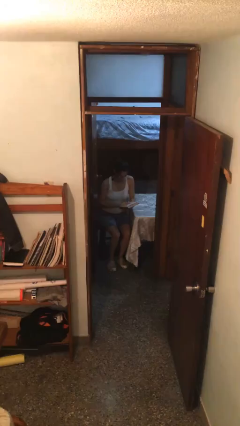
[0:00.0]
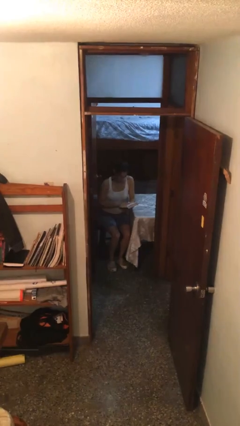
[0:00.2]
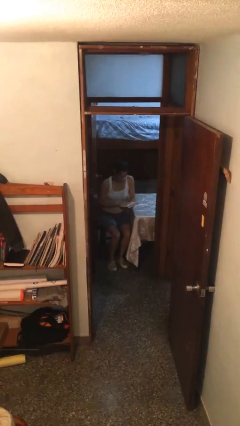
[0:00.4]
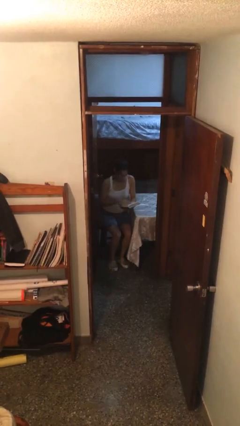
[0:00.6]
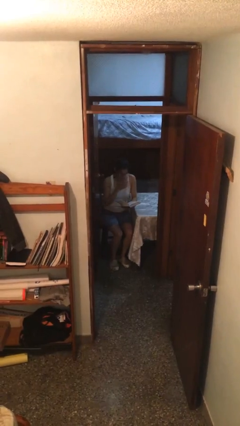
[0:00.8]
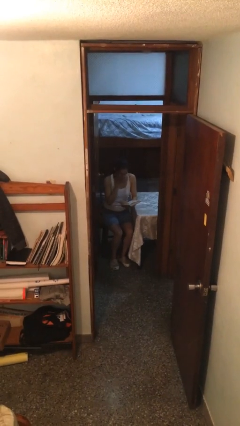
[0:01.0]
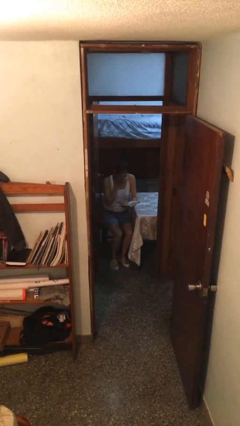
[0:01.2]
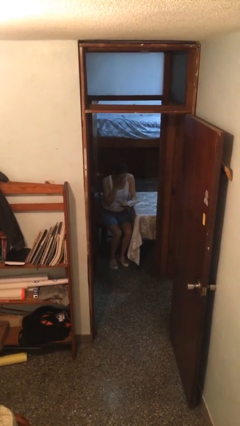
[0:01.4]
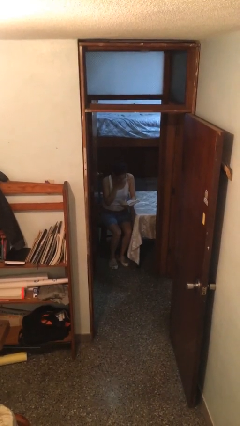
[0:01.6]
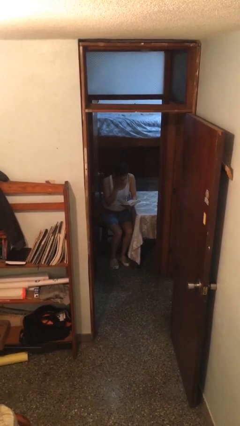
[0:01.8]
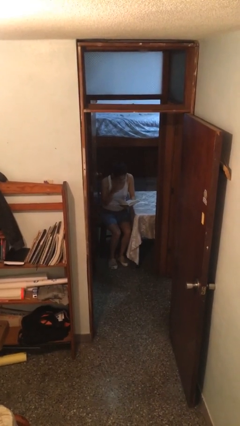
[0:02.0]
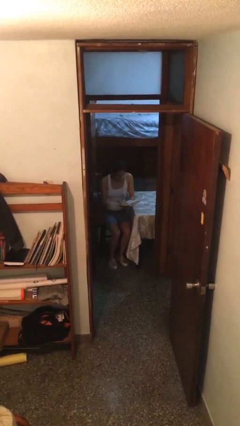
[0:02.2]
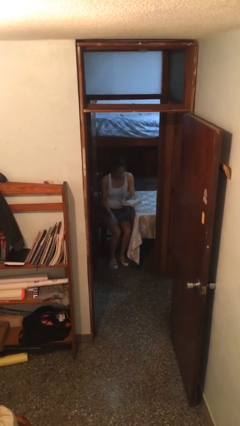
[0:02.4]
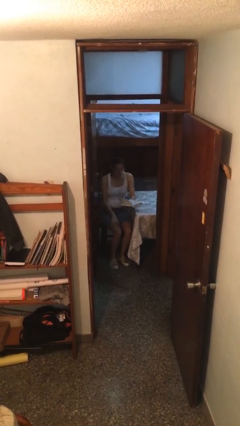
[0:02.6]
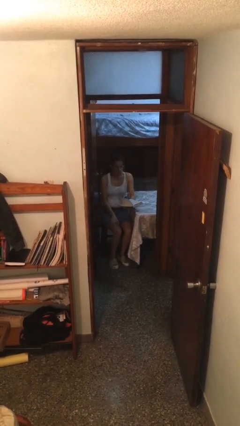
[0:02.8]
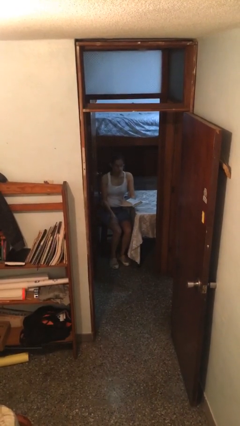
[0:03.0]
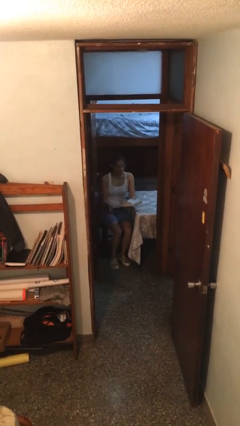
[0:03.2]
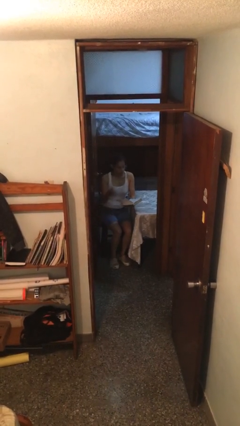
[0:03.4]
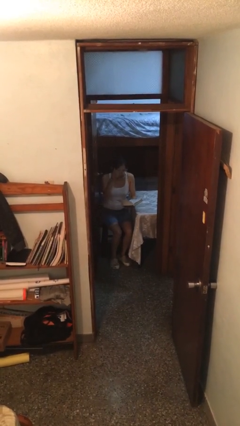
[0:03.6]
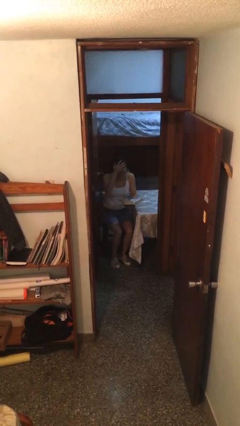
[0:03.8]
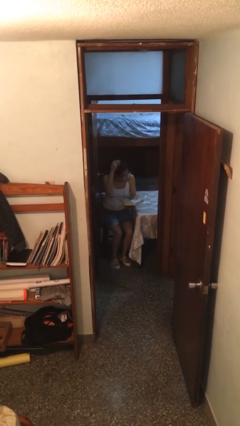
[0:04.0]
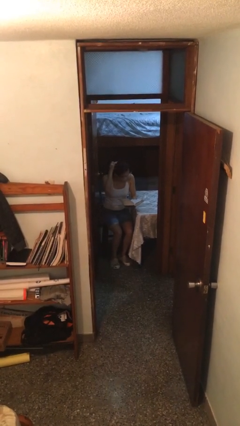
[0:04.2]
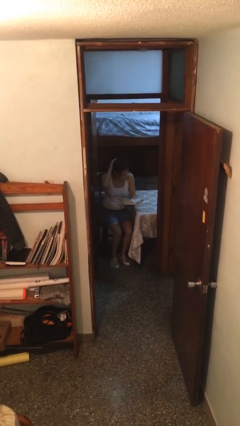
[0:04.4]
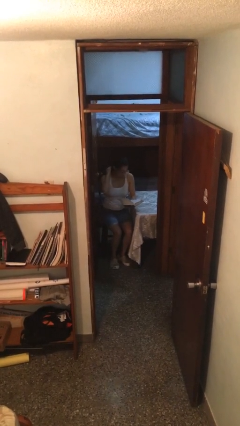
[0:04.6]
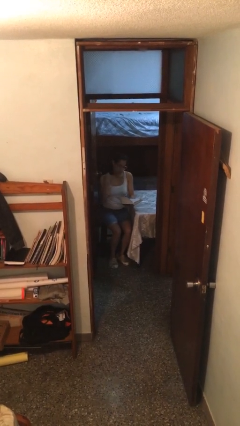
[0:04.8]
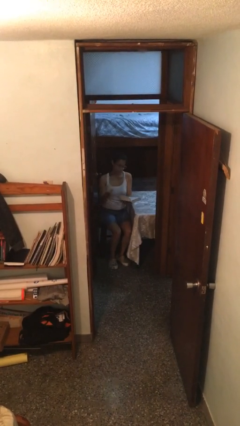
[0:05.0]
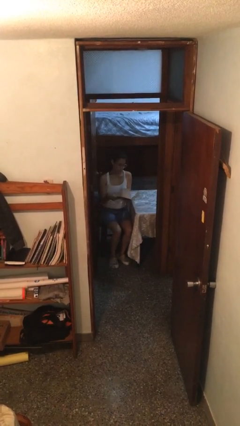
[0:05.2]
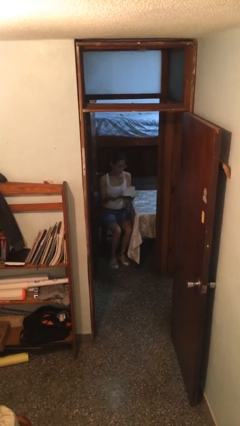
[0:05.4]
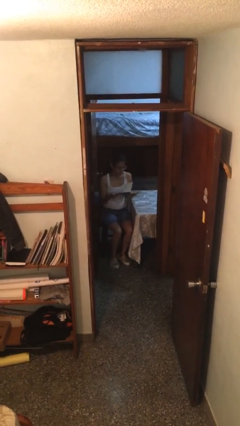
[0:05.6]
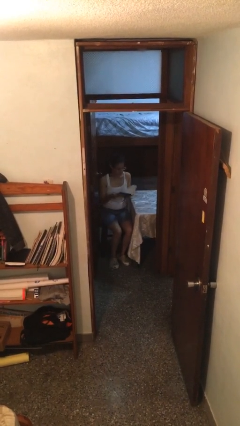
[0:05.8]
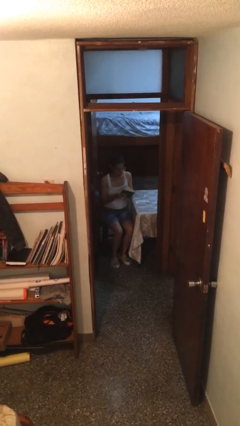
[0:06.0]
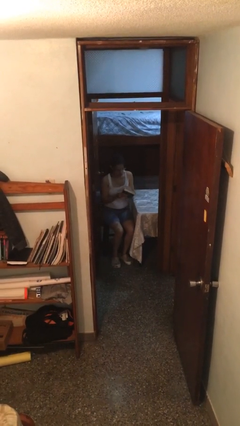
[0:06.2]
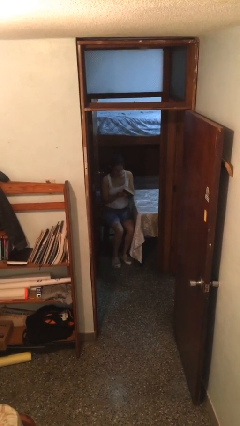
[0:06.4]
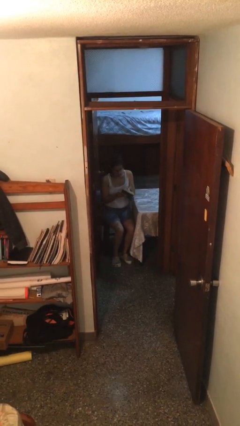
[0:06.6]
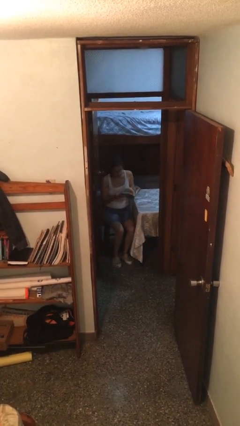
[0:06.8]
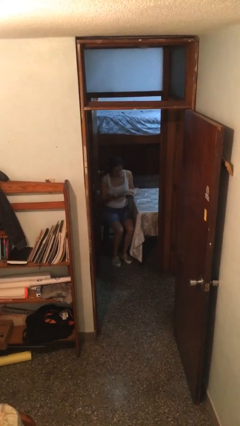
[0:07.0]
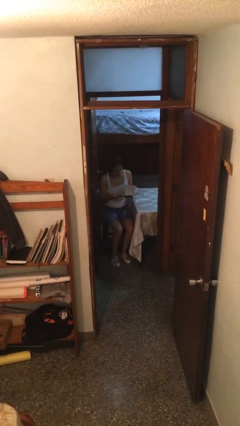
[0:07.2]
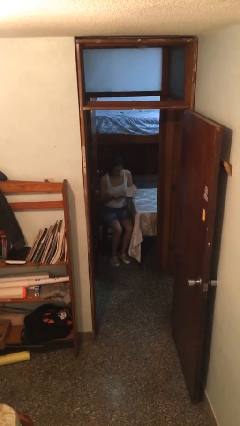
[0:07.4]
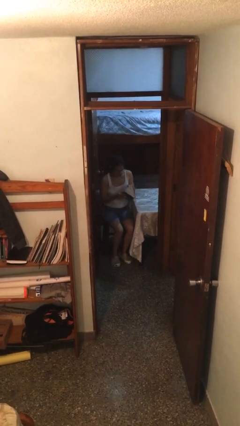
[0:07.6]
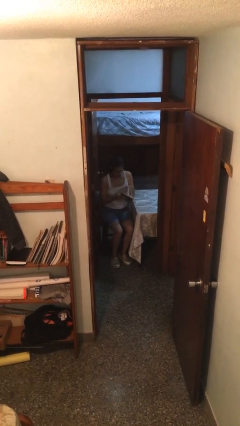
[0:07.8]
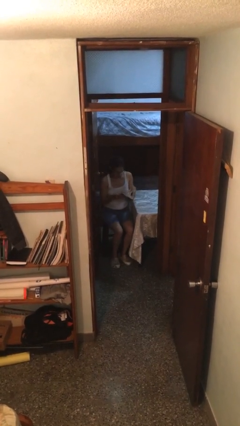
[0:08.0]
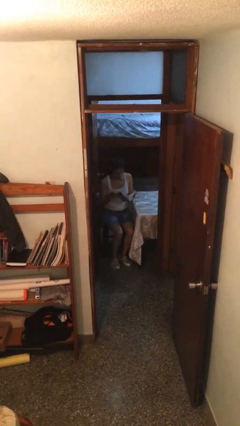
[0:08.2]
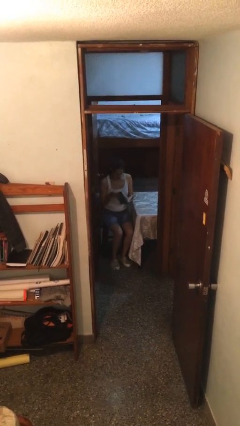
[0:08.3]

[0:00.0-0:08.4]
person reads document

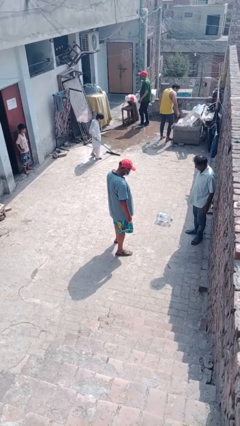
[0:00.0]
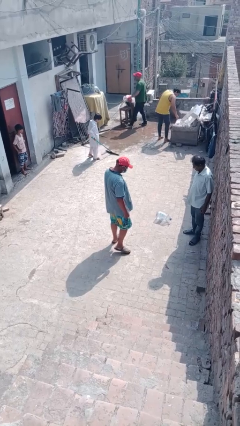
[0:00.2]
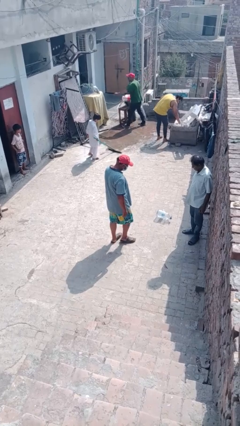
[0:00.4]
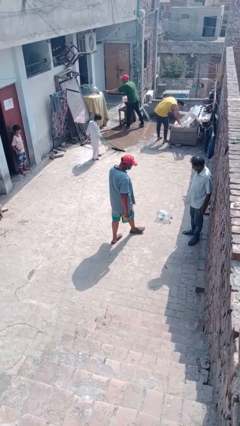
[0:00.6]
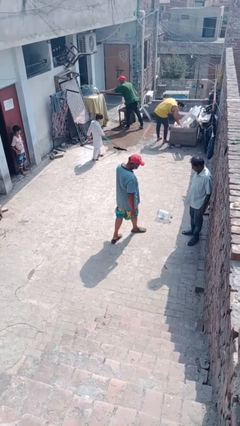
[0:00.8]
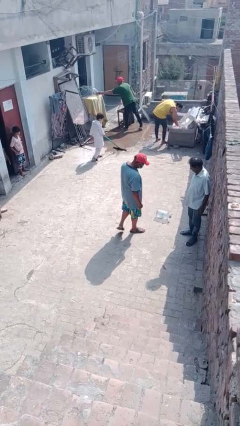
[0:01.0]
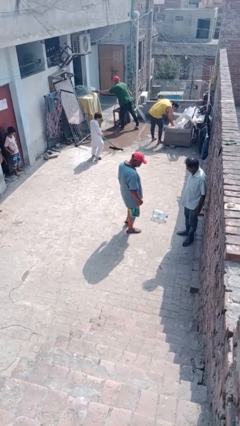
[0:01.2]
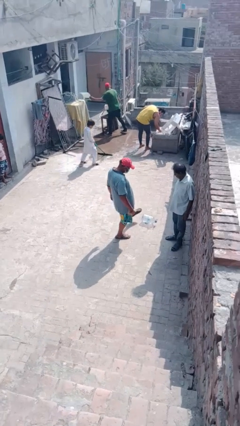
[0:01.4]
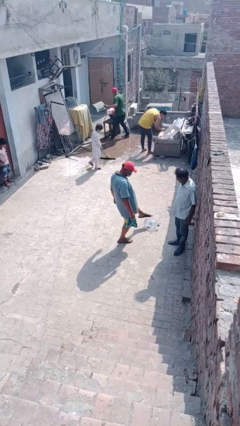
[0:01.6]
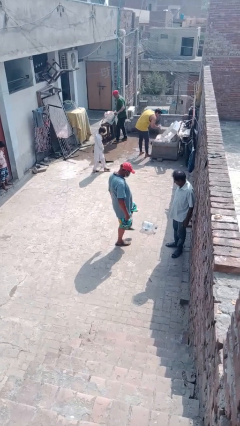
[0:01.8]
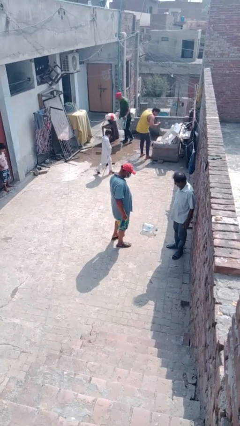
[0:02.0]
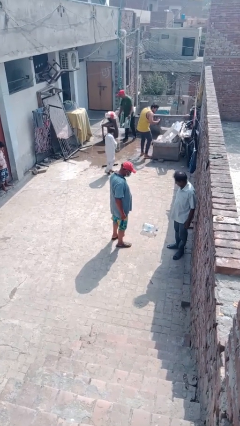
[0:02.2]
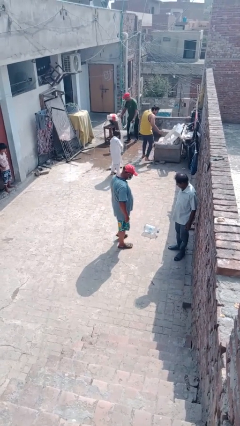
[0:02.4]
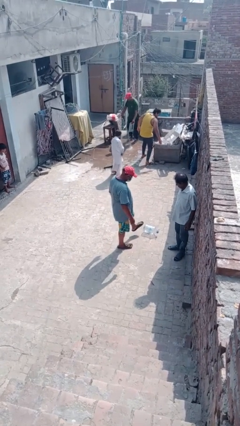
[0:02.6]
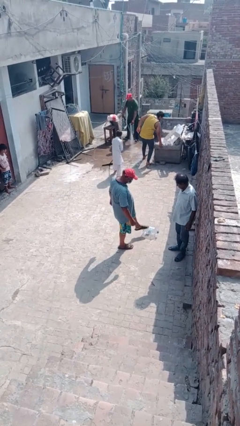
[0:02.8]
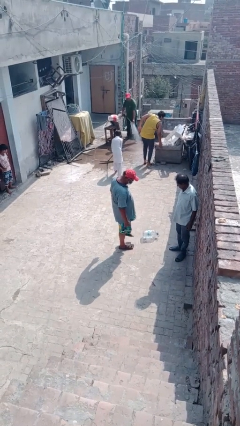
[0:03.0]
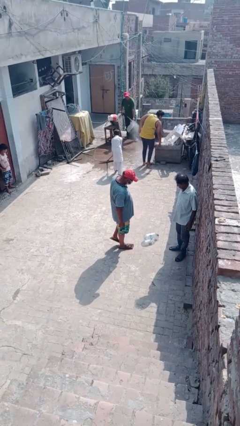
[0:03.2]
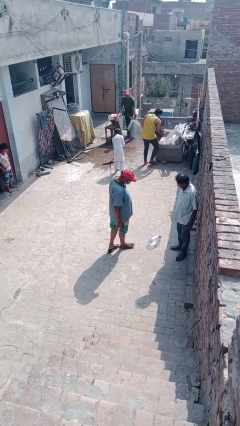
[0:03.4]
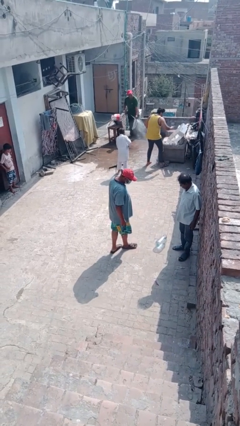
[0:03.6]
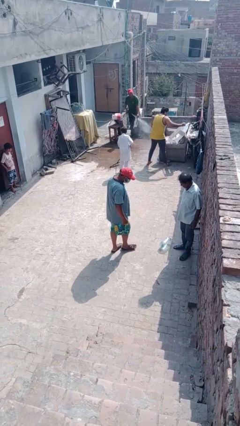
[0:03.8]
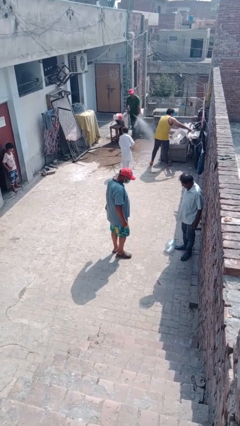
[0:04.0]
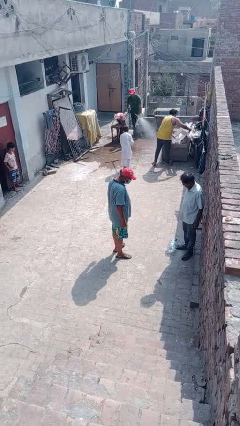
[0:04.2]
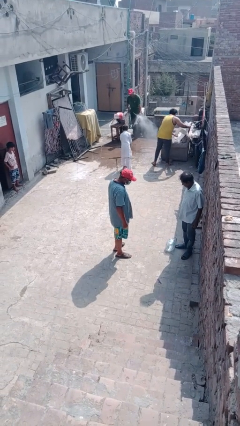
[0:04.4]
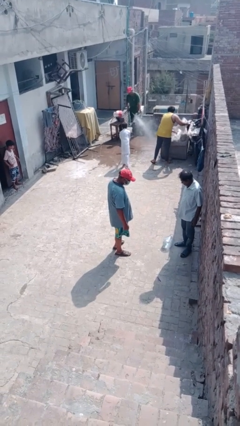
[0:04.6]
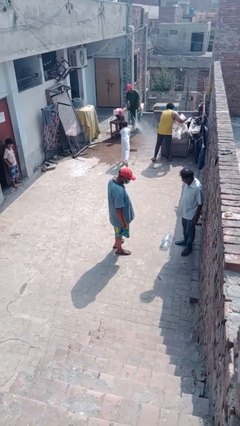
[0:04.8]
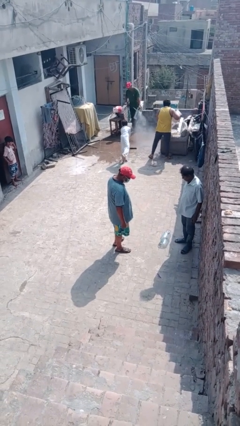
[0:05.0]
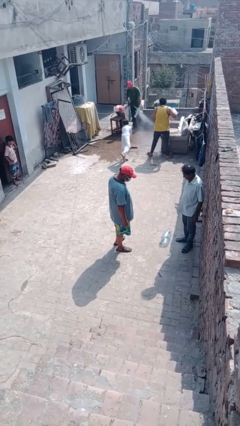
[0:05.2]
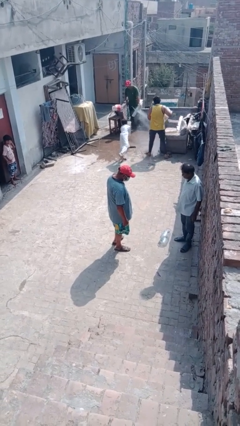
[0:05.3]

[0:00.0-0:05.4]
person kicks object to person

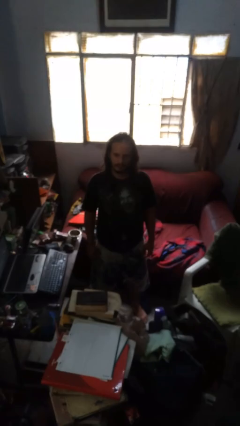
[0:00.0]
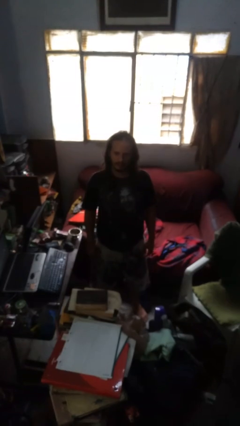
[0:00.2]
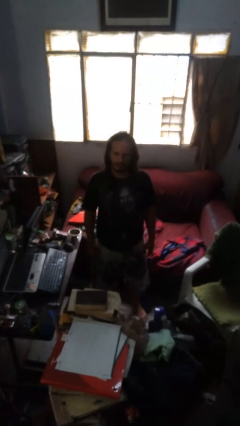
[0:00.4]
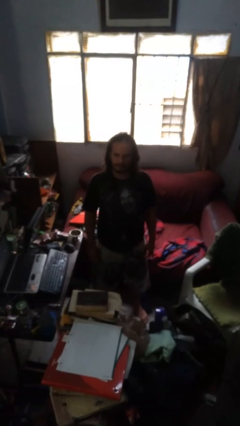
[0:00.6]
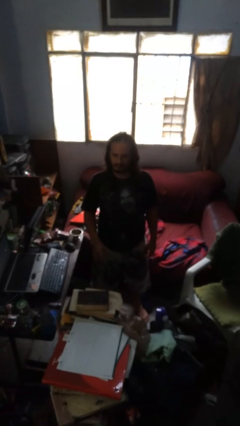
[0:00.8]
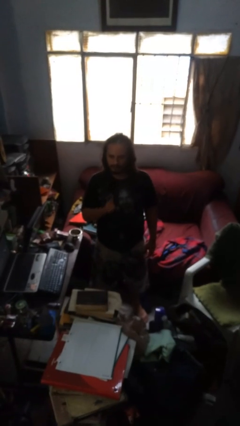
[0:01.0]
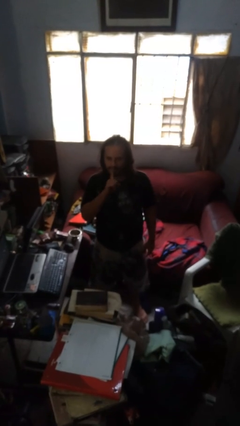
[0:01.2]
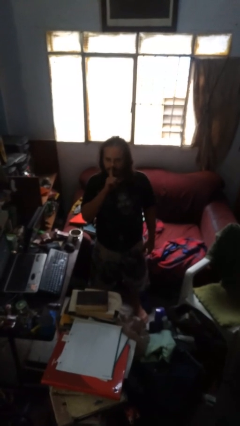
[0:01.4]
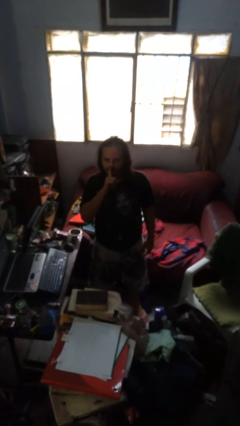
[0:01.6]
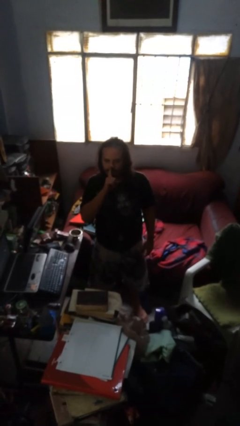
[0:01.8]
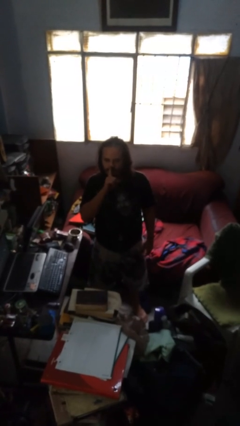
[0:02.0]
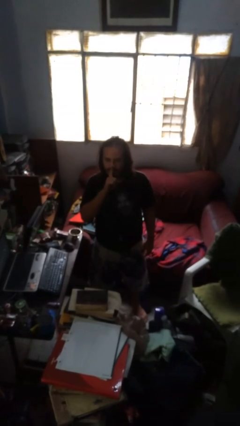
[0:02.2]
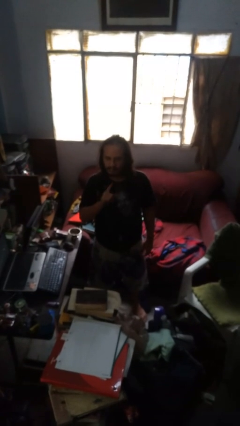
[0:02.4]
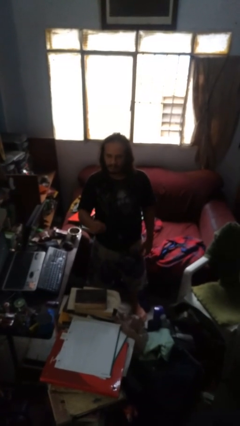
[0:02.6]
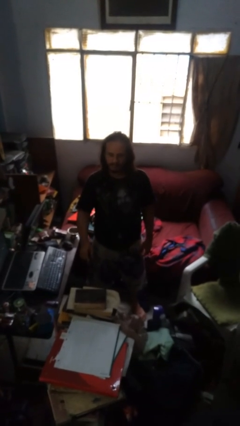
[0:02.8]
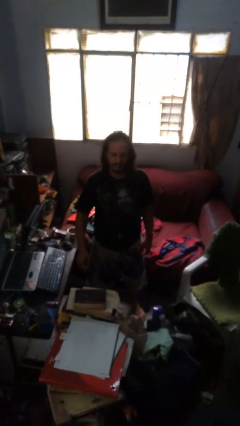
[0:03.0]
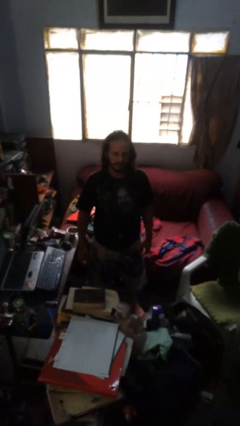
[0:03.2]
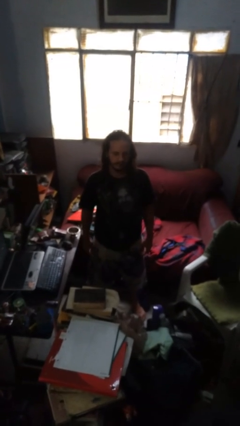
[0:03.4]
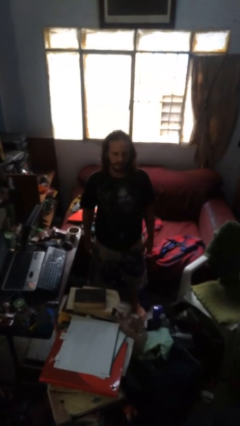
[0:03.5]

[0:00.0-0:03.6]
person gestures be quiet

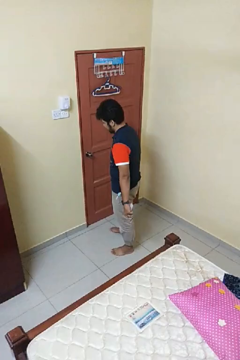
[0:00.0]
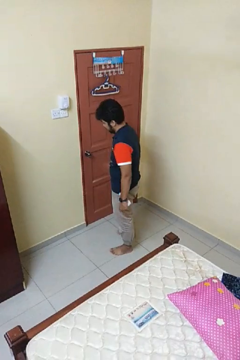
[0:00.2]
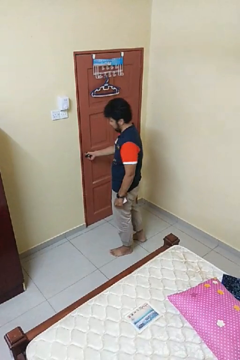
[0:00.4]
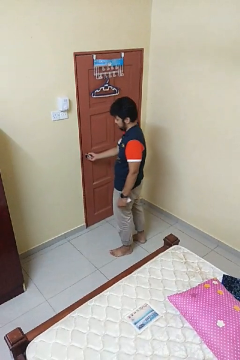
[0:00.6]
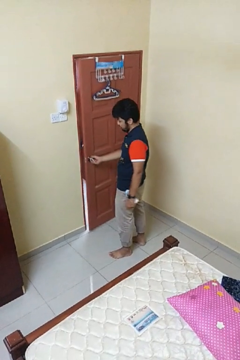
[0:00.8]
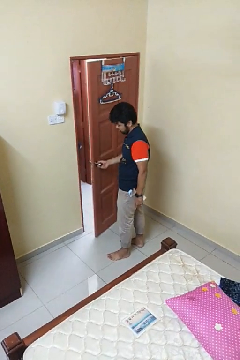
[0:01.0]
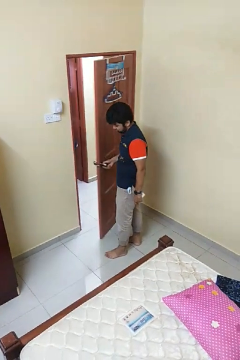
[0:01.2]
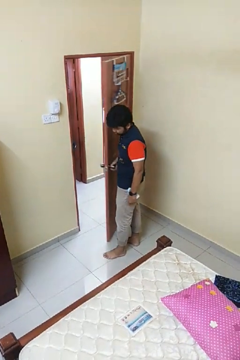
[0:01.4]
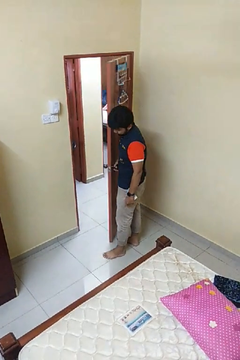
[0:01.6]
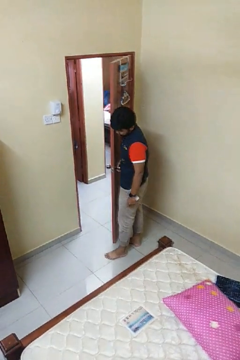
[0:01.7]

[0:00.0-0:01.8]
person opens facility door
